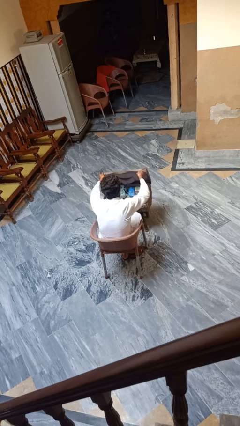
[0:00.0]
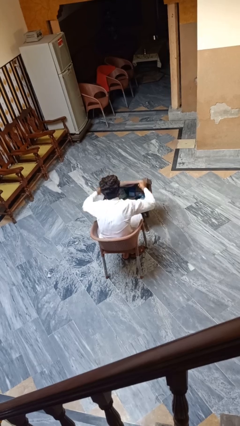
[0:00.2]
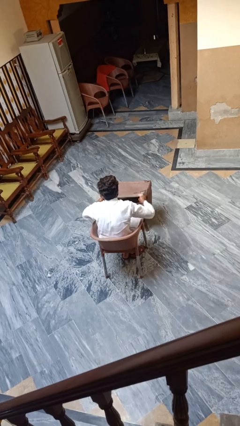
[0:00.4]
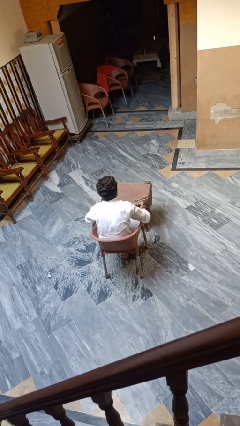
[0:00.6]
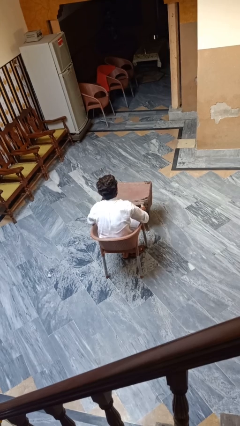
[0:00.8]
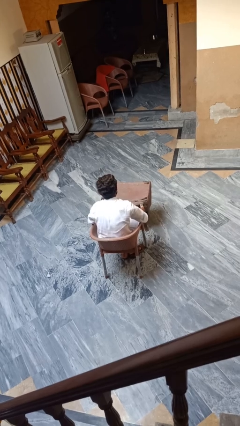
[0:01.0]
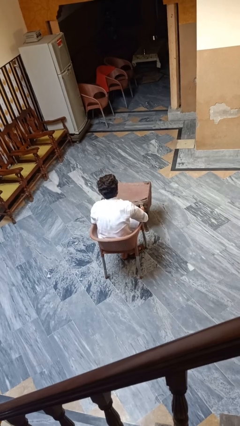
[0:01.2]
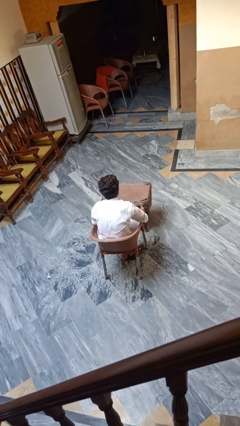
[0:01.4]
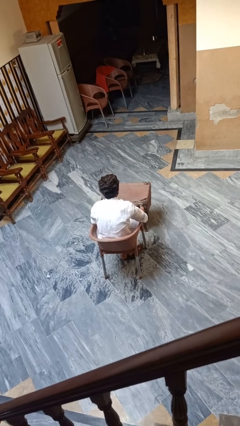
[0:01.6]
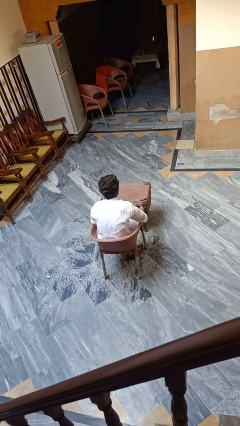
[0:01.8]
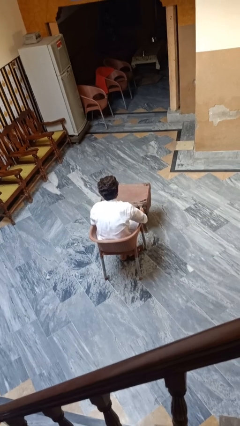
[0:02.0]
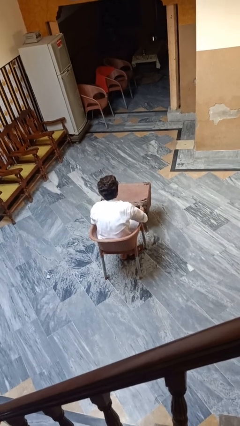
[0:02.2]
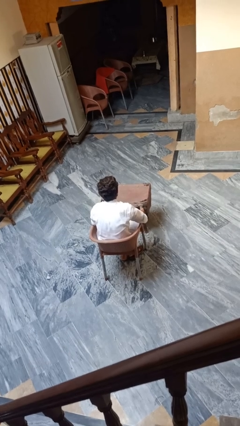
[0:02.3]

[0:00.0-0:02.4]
person closes suitcase

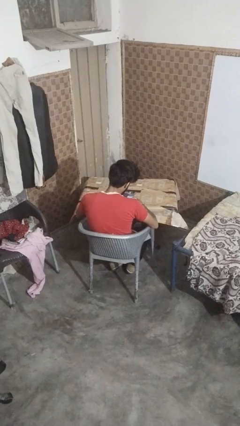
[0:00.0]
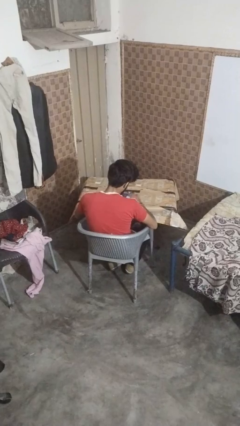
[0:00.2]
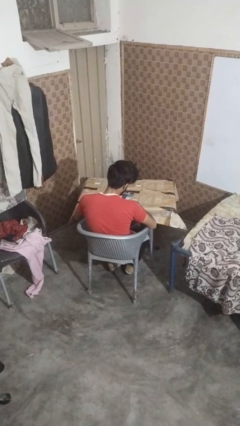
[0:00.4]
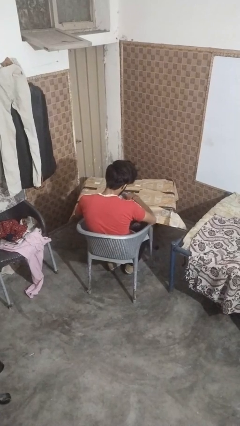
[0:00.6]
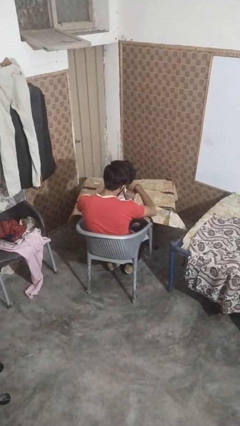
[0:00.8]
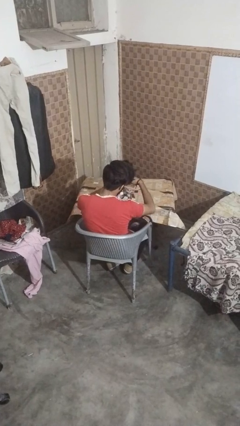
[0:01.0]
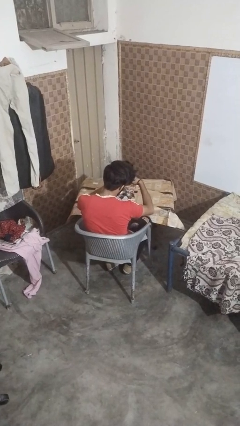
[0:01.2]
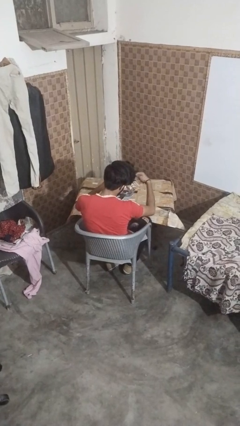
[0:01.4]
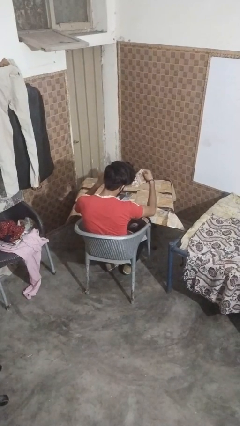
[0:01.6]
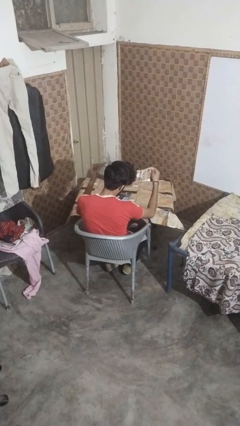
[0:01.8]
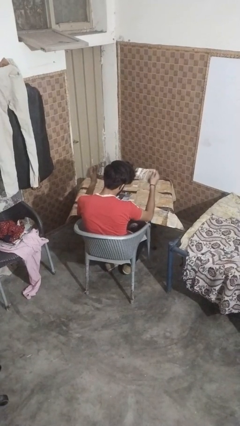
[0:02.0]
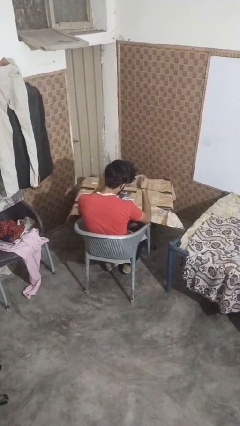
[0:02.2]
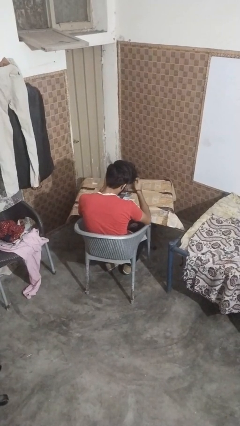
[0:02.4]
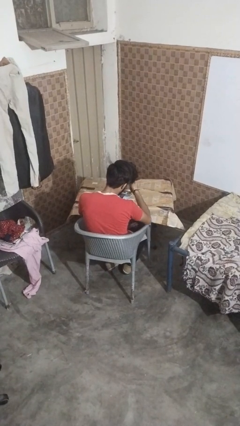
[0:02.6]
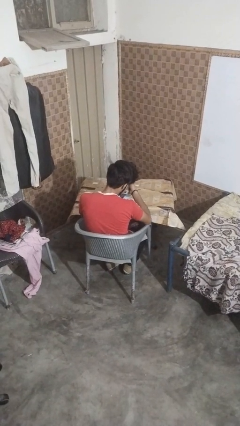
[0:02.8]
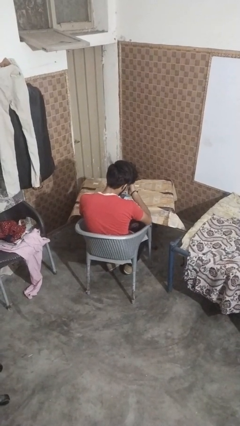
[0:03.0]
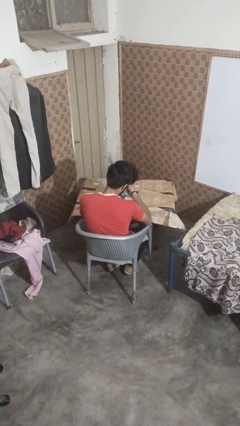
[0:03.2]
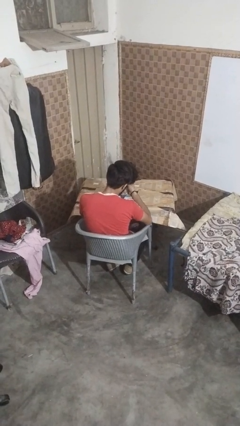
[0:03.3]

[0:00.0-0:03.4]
person tears paper

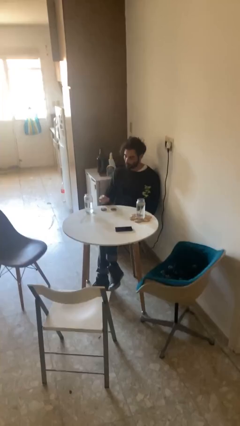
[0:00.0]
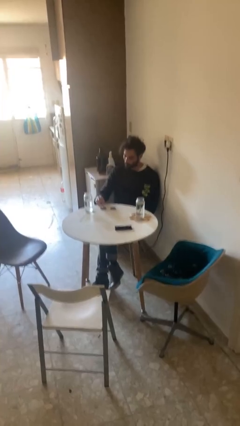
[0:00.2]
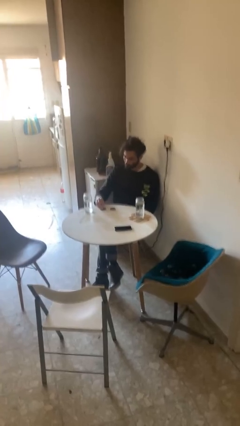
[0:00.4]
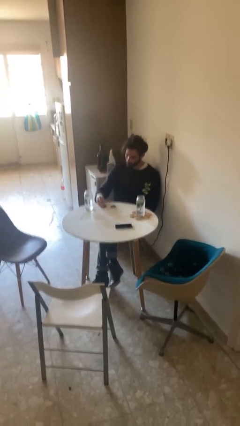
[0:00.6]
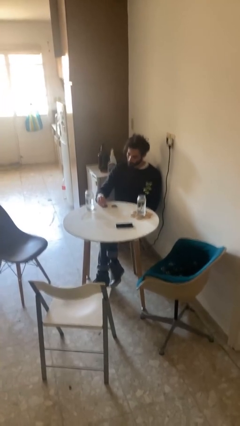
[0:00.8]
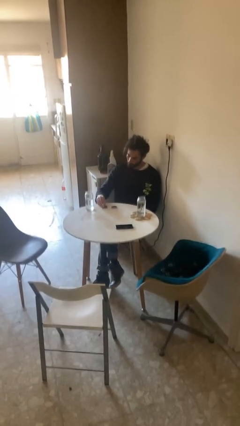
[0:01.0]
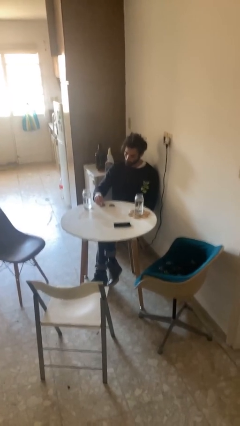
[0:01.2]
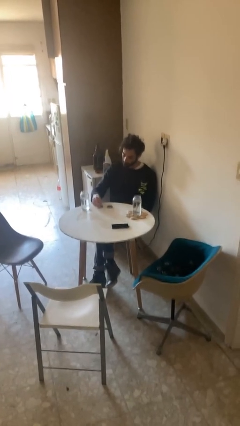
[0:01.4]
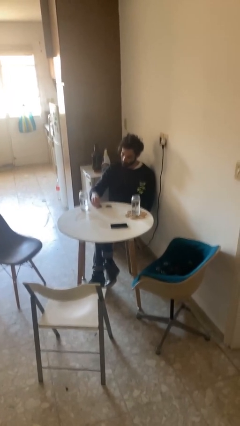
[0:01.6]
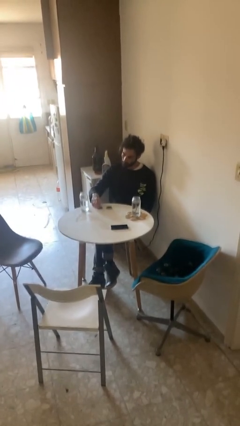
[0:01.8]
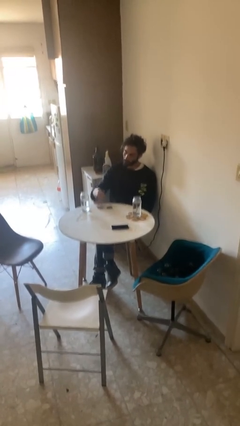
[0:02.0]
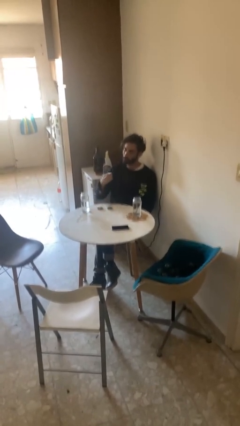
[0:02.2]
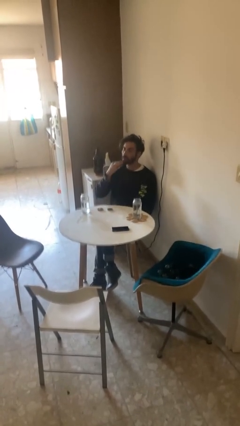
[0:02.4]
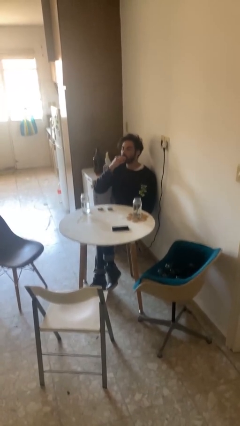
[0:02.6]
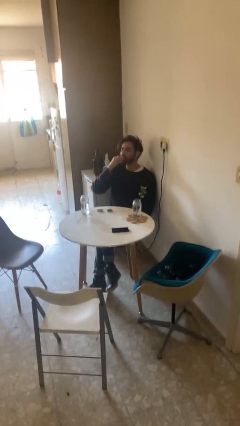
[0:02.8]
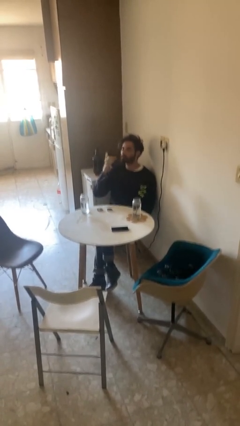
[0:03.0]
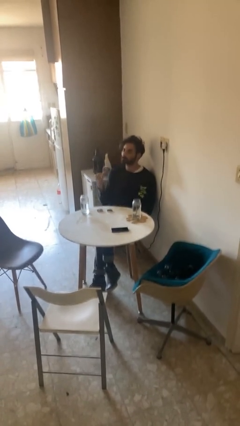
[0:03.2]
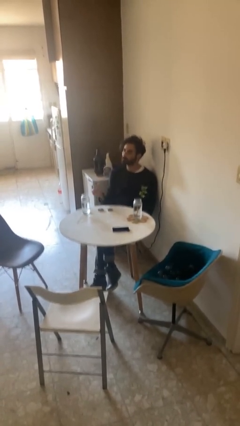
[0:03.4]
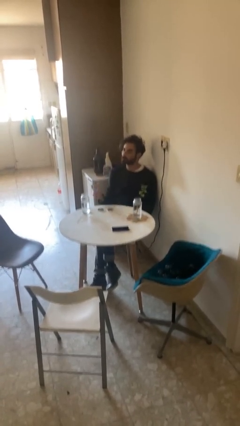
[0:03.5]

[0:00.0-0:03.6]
person takes medicine pills

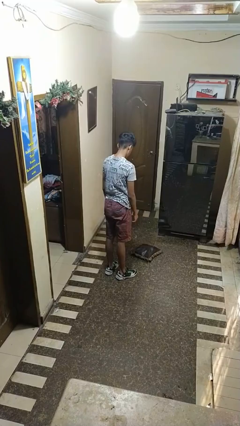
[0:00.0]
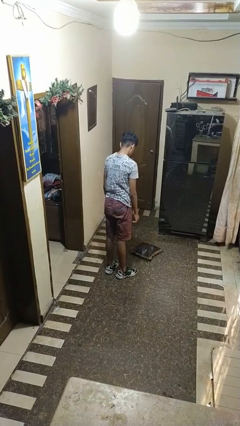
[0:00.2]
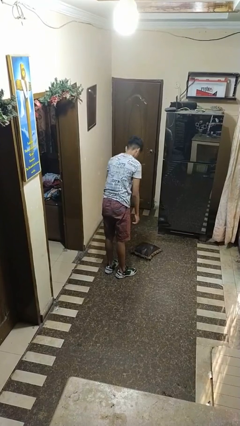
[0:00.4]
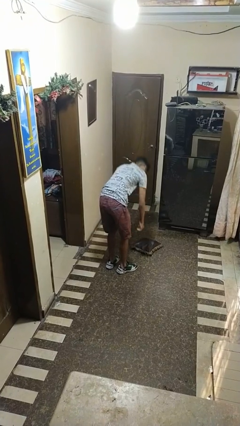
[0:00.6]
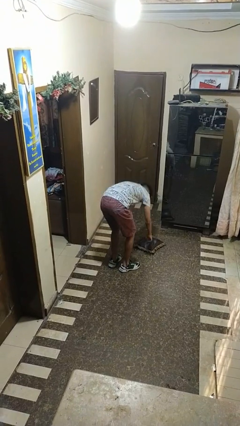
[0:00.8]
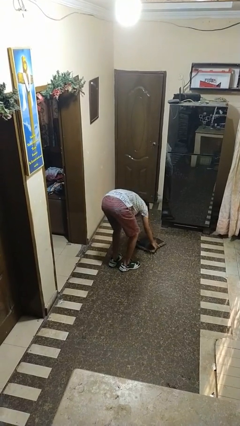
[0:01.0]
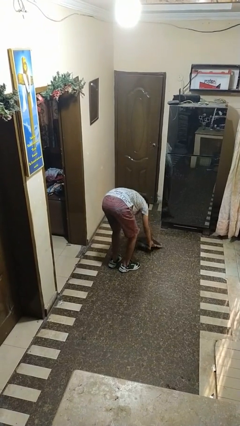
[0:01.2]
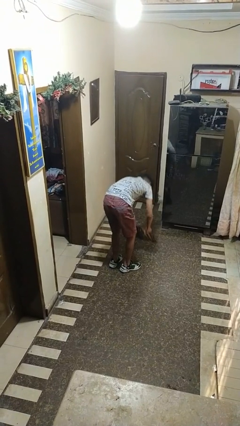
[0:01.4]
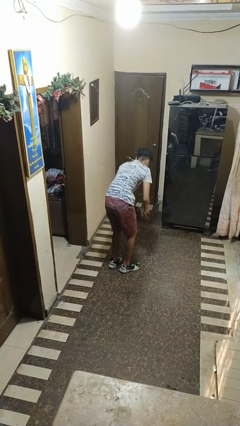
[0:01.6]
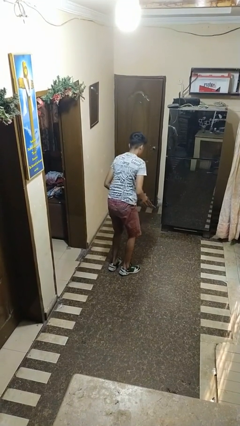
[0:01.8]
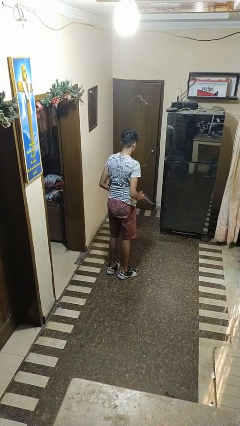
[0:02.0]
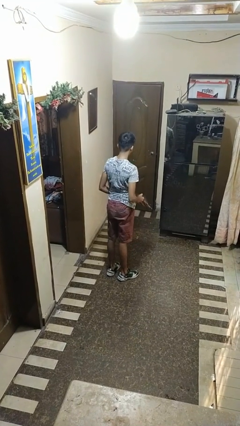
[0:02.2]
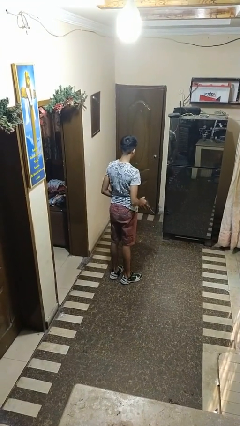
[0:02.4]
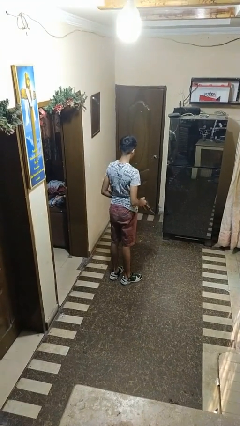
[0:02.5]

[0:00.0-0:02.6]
person picks up object from floor

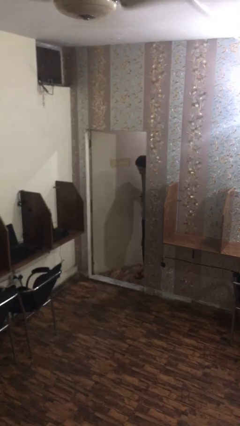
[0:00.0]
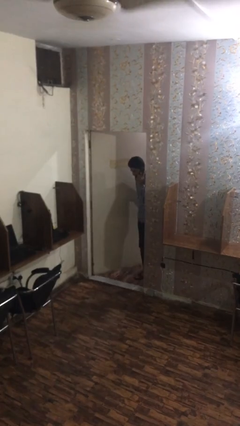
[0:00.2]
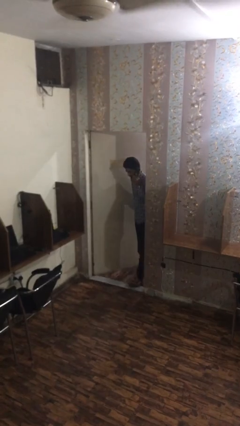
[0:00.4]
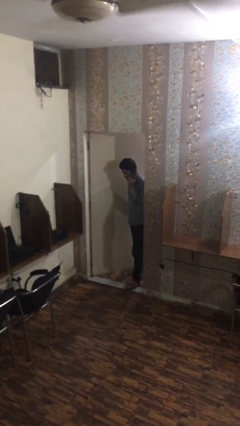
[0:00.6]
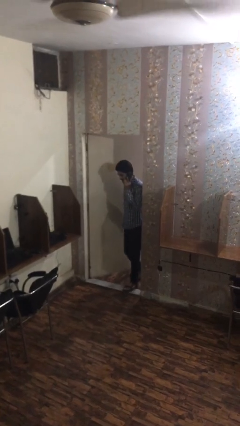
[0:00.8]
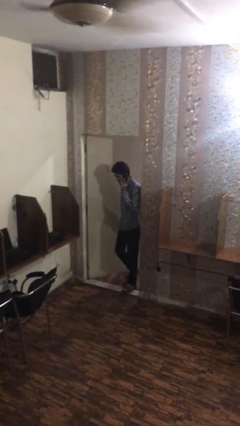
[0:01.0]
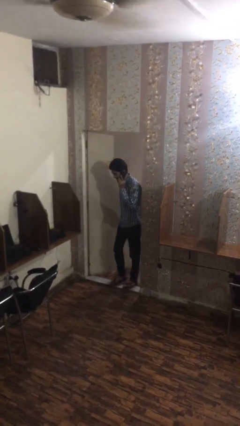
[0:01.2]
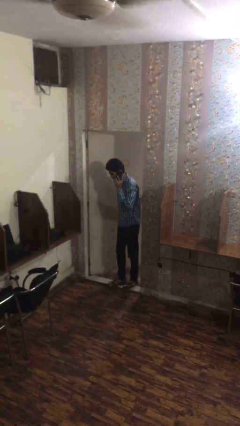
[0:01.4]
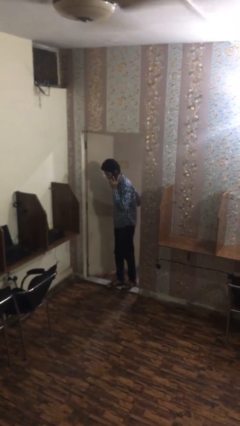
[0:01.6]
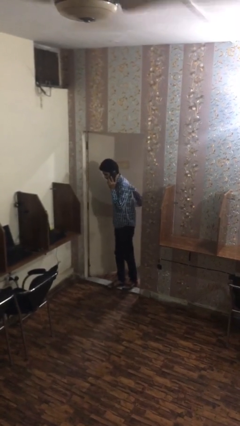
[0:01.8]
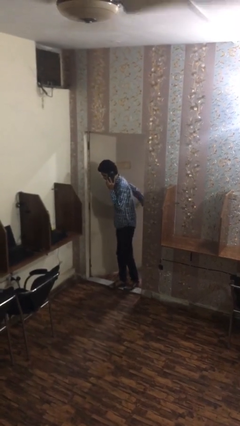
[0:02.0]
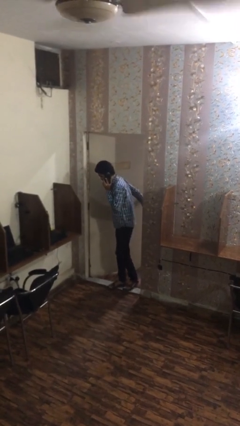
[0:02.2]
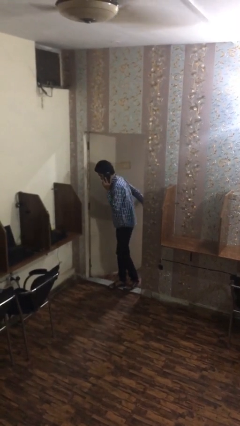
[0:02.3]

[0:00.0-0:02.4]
person enters scene through structure

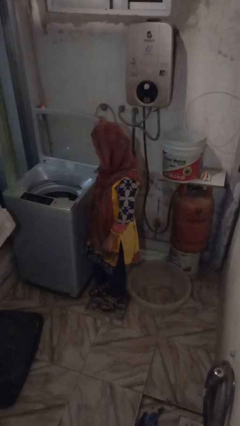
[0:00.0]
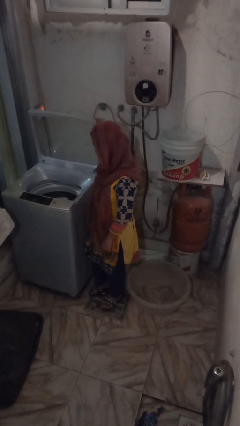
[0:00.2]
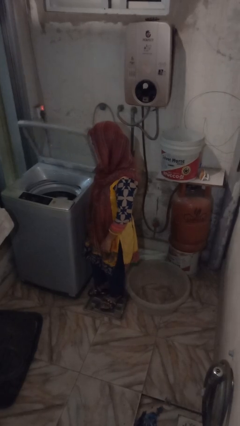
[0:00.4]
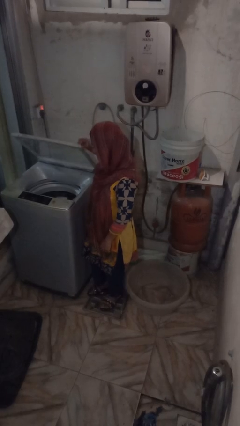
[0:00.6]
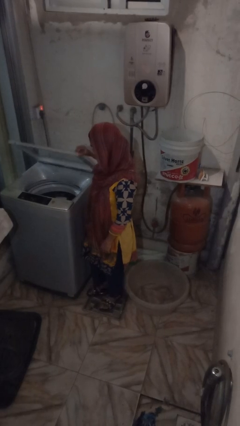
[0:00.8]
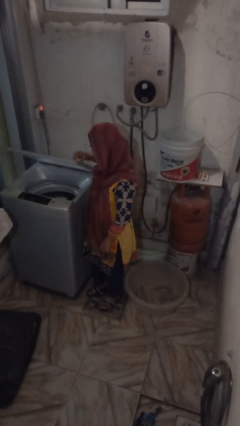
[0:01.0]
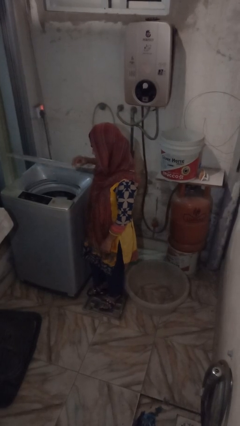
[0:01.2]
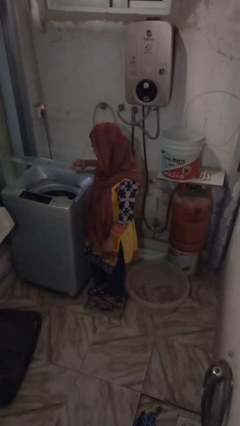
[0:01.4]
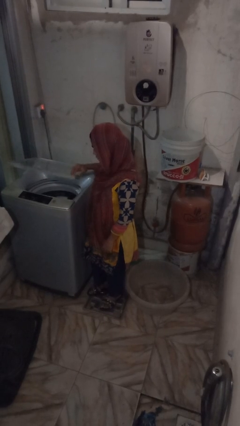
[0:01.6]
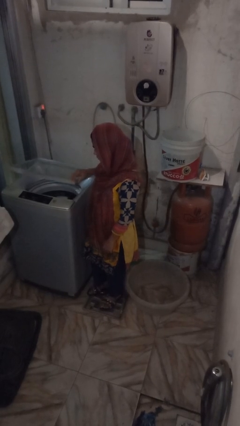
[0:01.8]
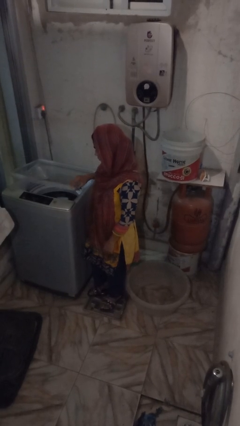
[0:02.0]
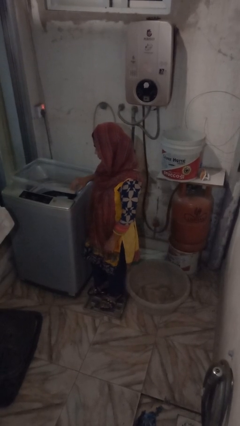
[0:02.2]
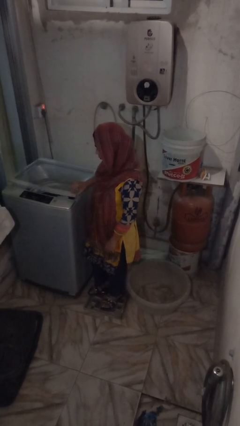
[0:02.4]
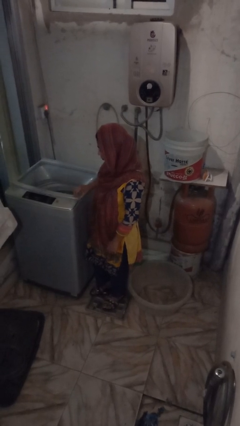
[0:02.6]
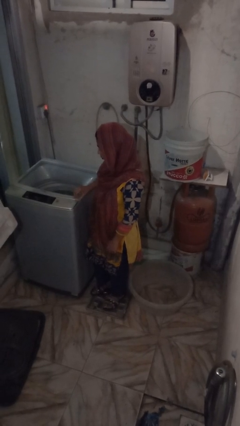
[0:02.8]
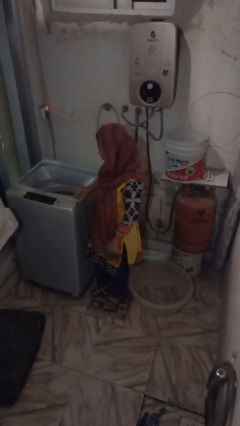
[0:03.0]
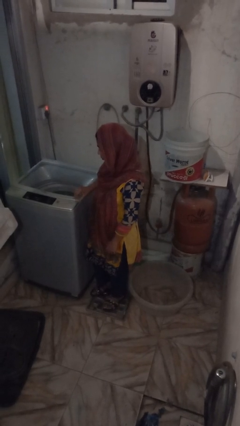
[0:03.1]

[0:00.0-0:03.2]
person closes clothes washer
